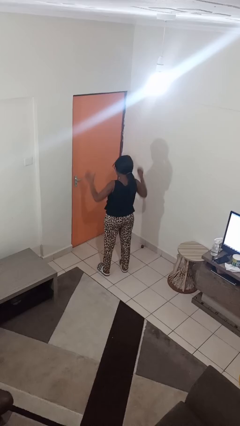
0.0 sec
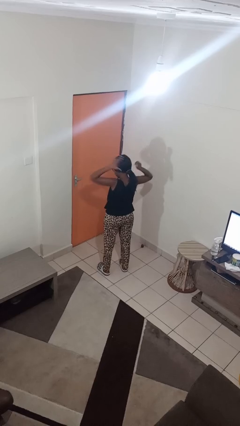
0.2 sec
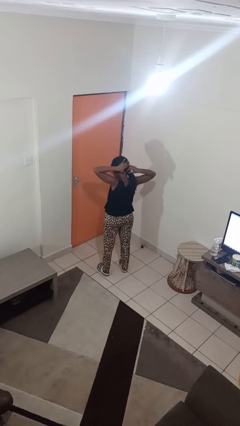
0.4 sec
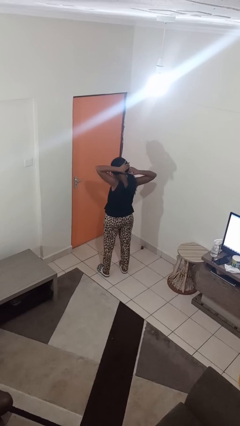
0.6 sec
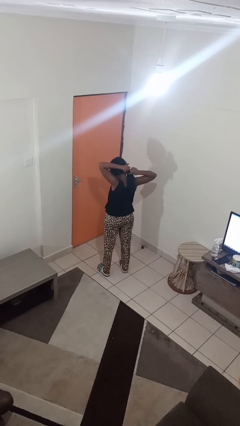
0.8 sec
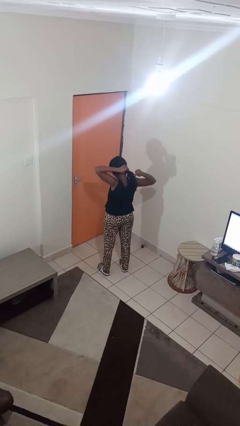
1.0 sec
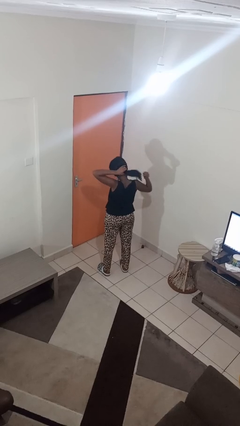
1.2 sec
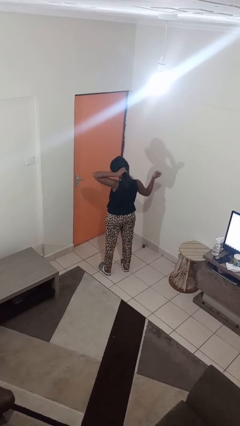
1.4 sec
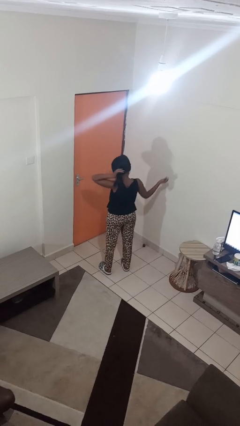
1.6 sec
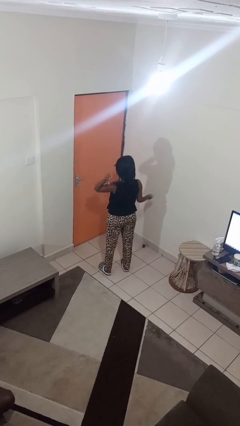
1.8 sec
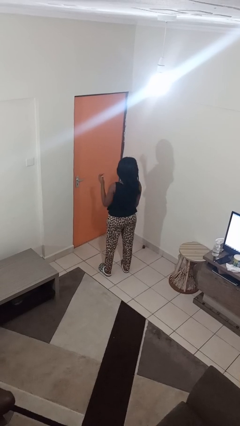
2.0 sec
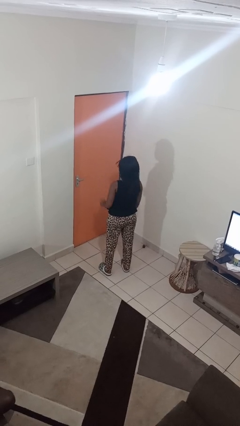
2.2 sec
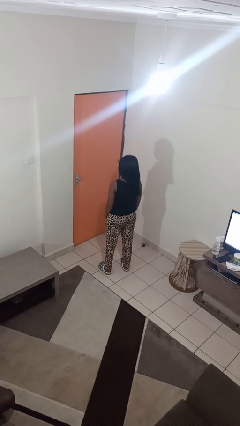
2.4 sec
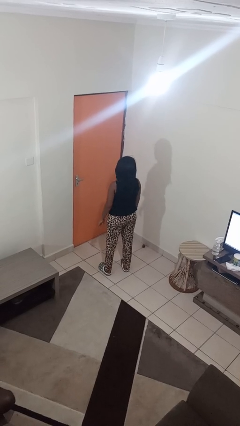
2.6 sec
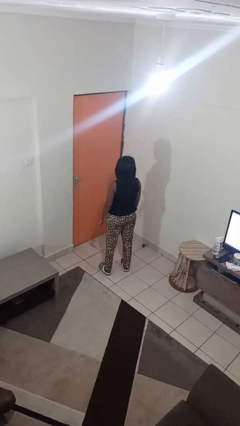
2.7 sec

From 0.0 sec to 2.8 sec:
person takes off hairtie

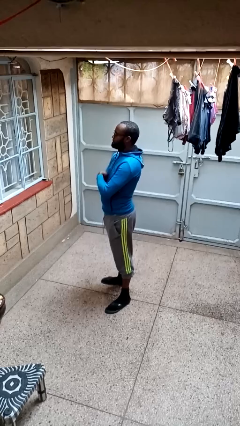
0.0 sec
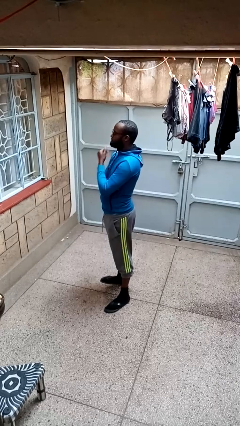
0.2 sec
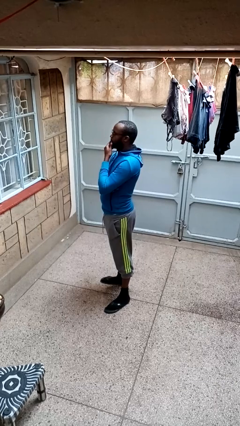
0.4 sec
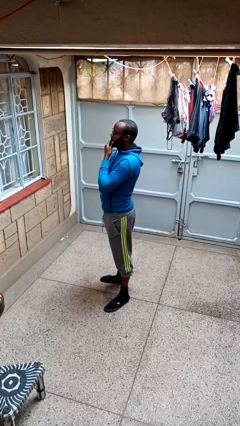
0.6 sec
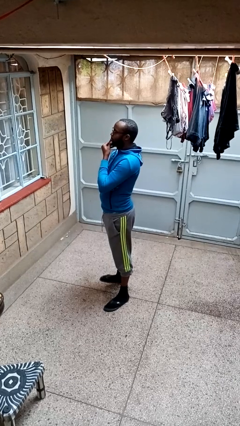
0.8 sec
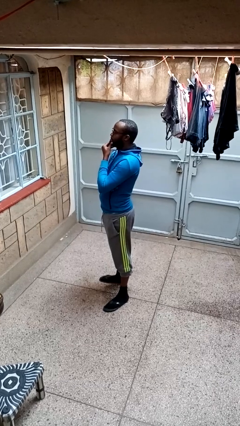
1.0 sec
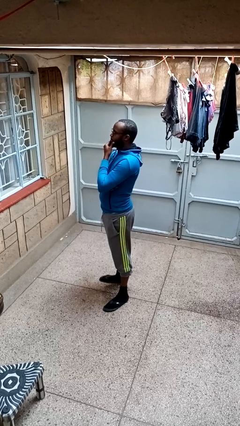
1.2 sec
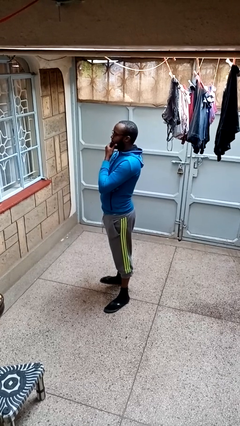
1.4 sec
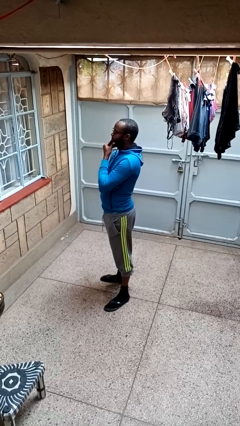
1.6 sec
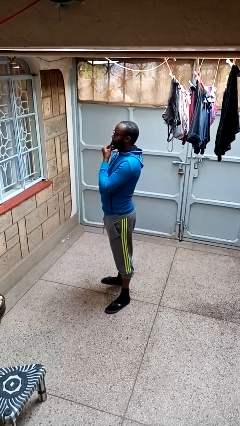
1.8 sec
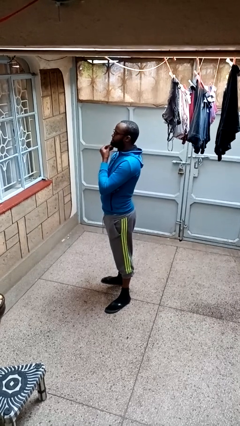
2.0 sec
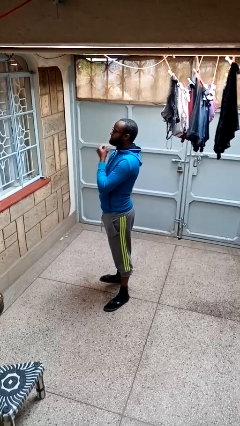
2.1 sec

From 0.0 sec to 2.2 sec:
person strokes chin

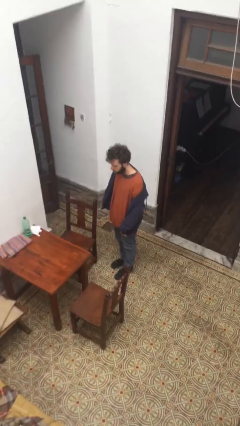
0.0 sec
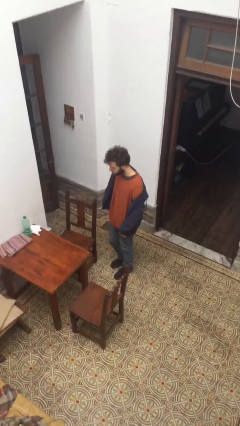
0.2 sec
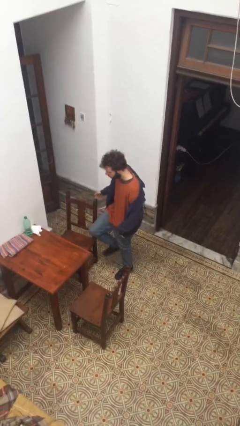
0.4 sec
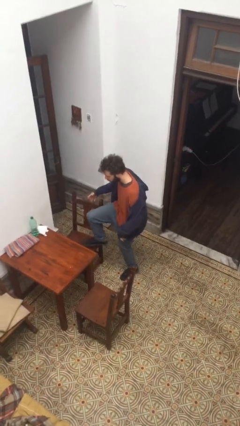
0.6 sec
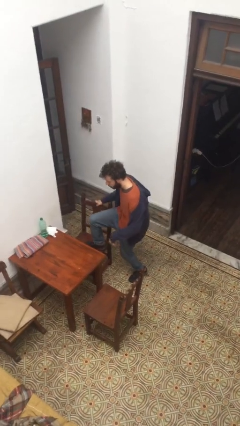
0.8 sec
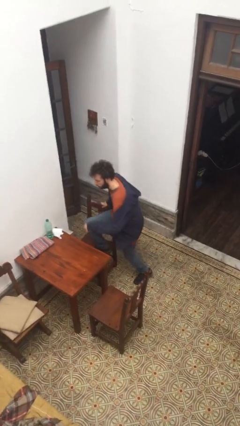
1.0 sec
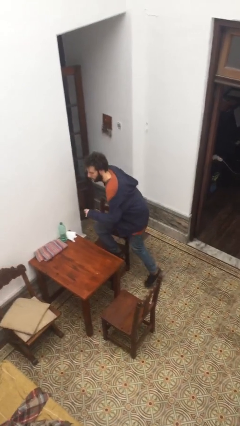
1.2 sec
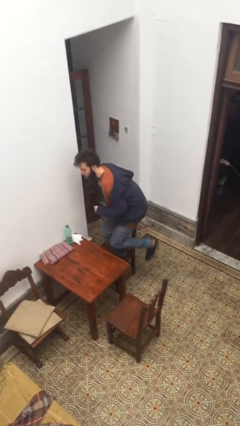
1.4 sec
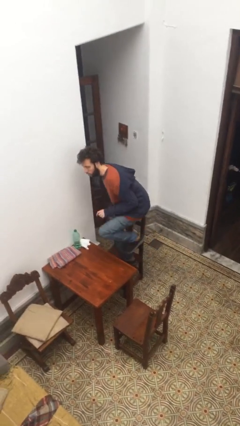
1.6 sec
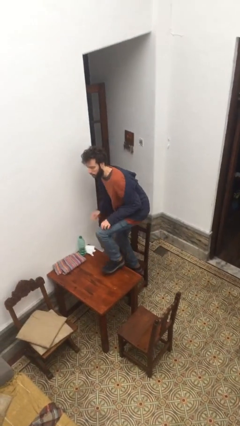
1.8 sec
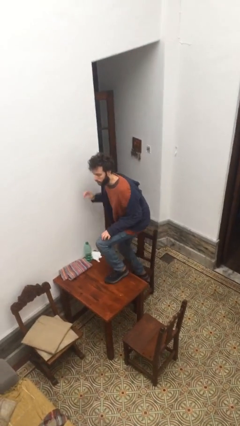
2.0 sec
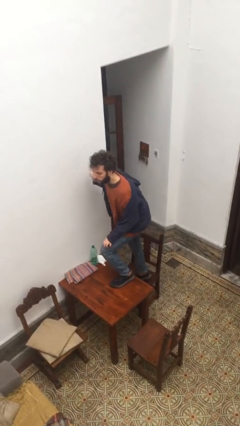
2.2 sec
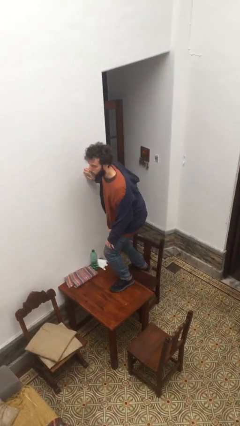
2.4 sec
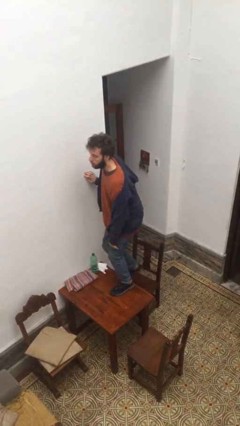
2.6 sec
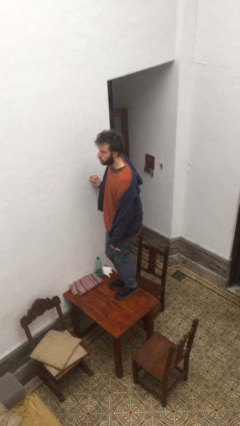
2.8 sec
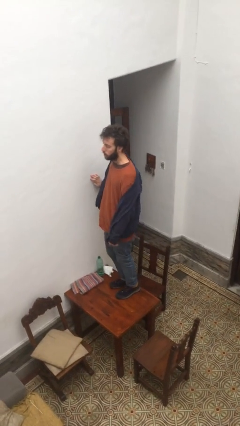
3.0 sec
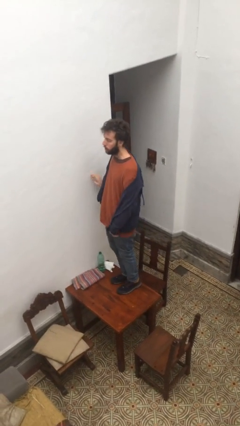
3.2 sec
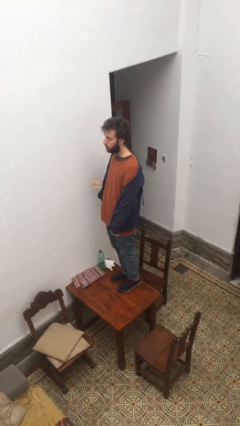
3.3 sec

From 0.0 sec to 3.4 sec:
person climbs on table

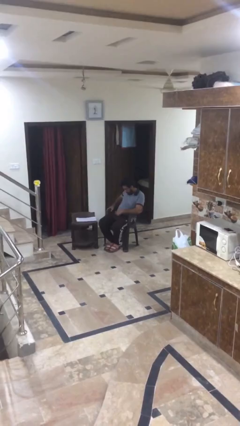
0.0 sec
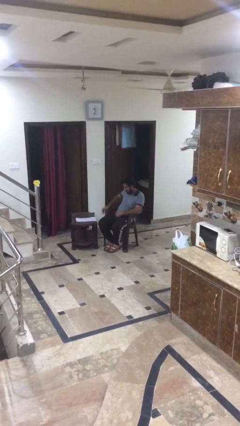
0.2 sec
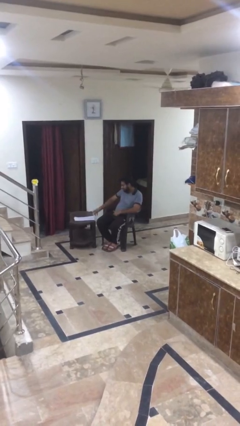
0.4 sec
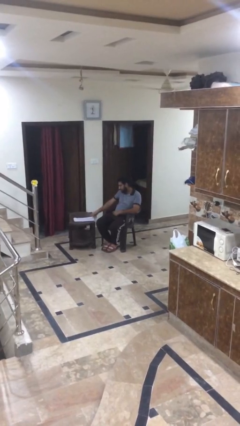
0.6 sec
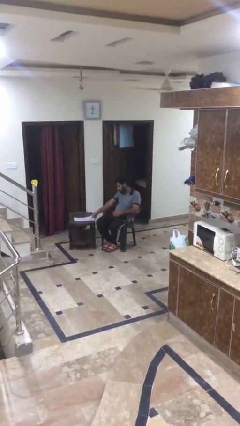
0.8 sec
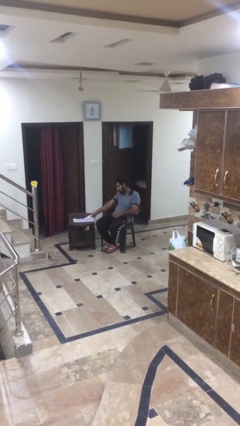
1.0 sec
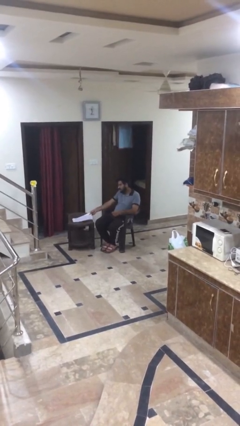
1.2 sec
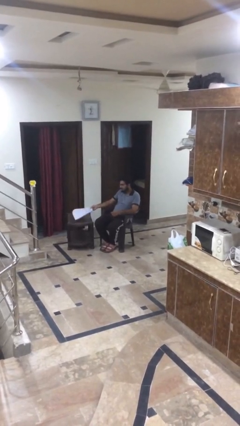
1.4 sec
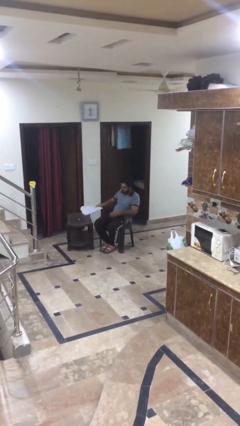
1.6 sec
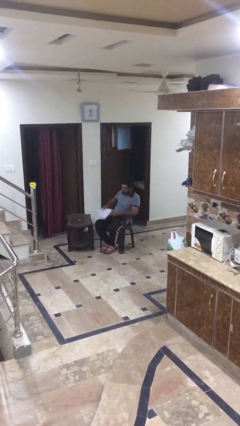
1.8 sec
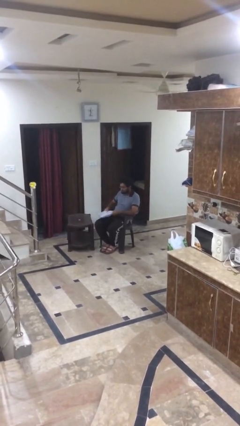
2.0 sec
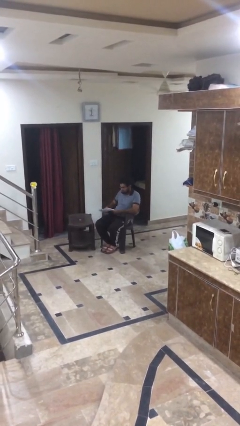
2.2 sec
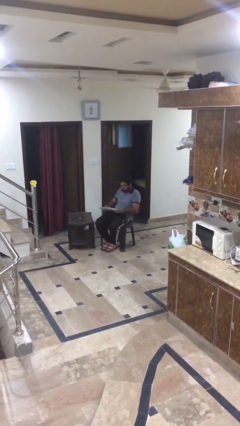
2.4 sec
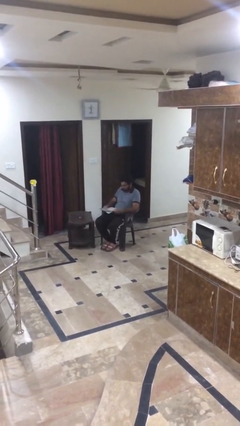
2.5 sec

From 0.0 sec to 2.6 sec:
person picks up object from table

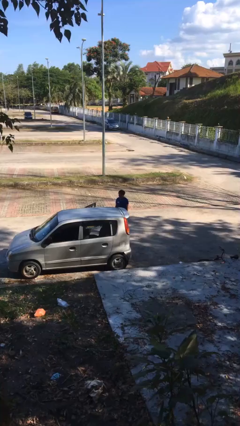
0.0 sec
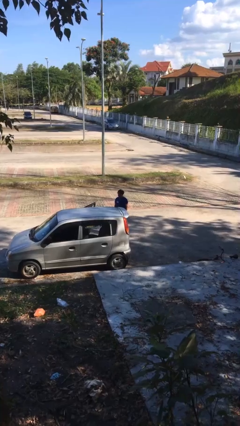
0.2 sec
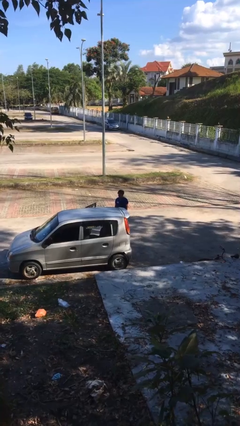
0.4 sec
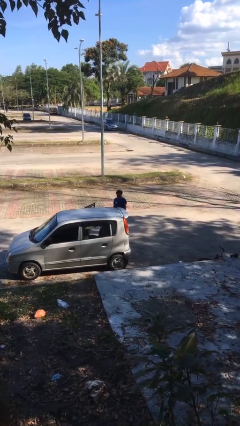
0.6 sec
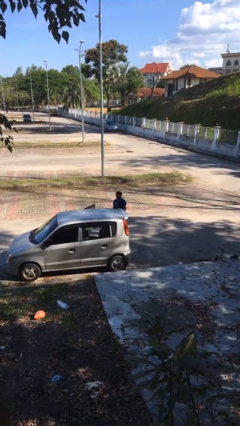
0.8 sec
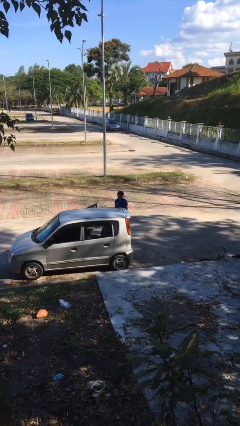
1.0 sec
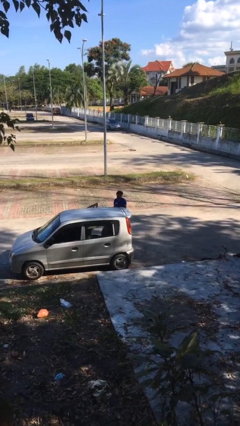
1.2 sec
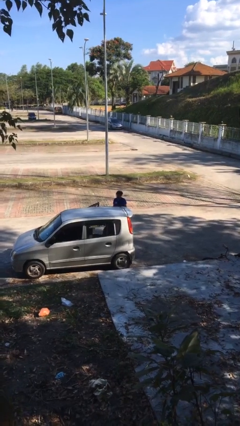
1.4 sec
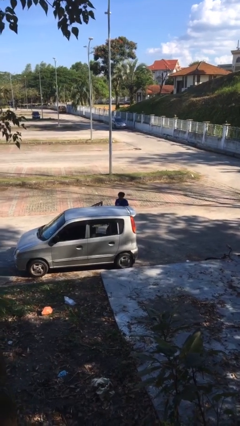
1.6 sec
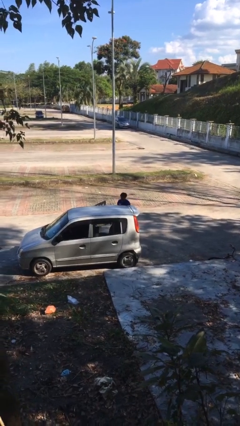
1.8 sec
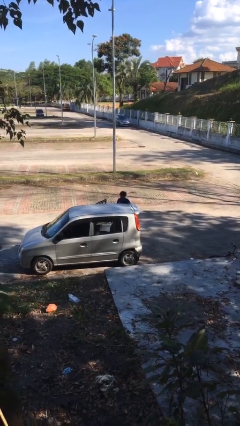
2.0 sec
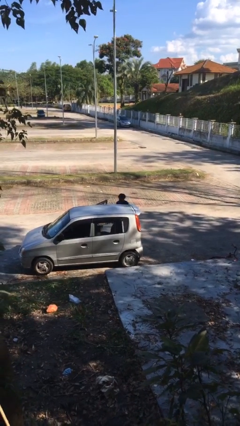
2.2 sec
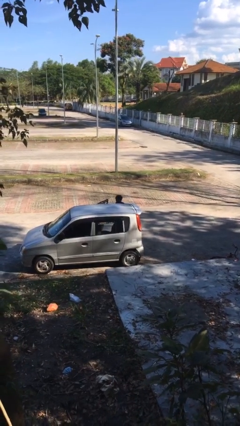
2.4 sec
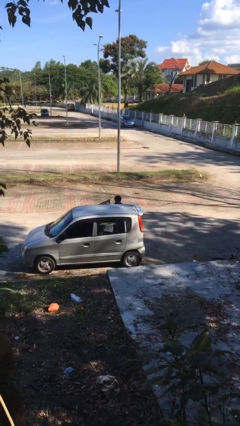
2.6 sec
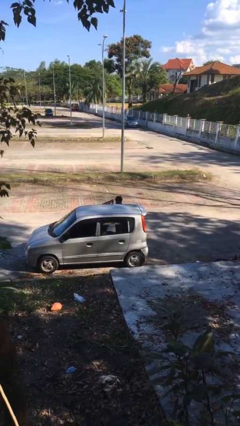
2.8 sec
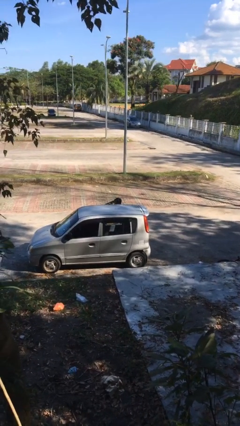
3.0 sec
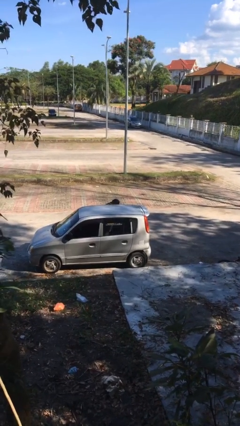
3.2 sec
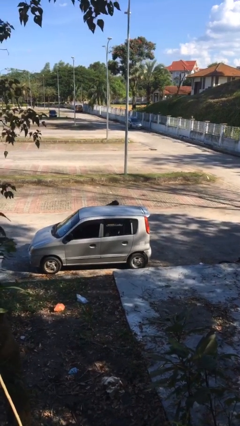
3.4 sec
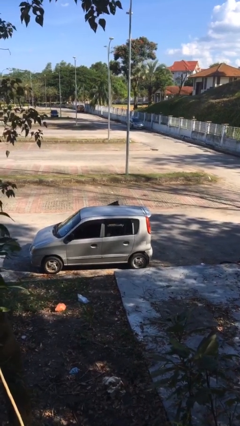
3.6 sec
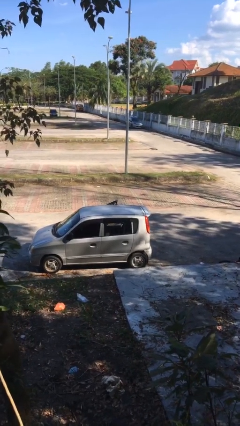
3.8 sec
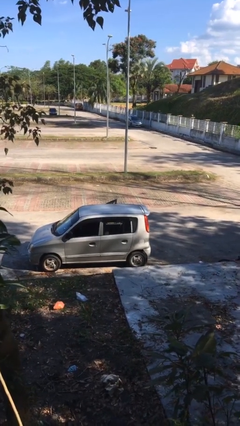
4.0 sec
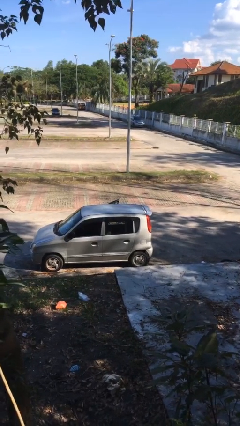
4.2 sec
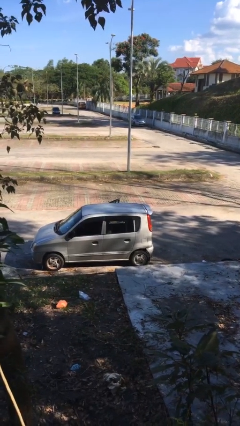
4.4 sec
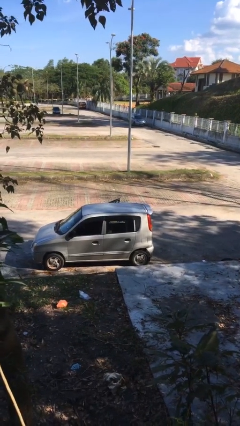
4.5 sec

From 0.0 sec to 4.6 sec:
person enters car

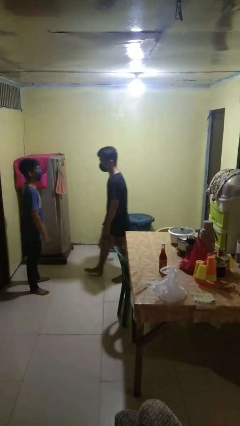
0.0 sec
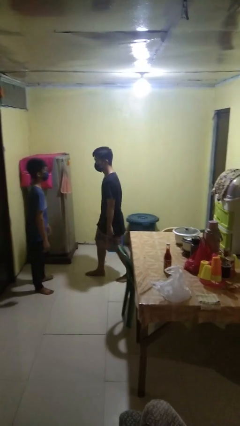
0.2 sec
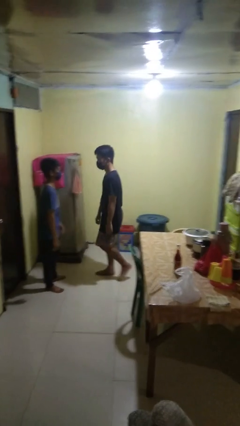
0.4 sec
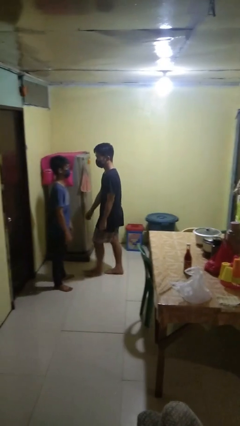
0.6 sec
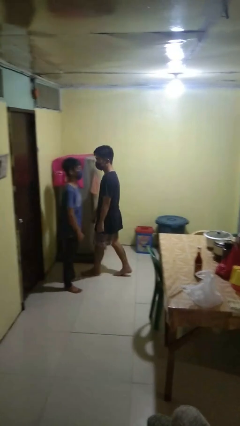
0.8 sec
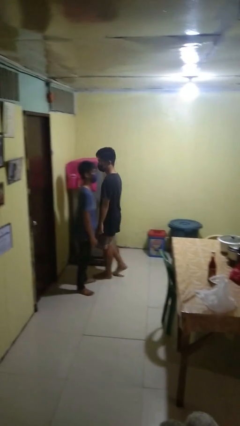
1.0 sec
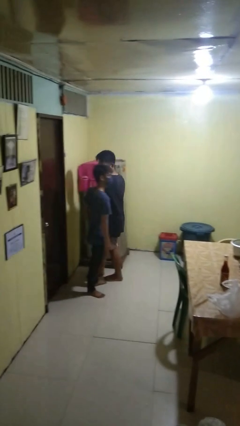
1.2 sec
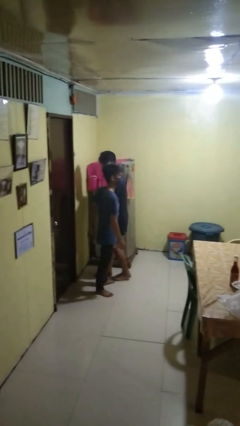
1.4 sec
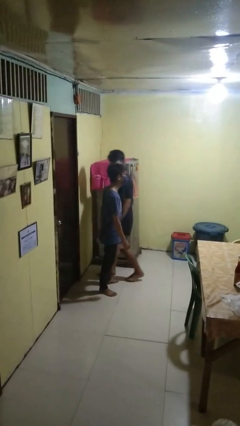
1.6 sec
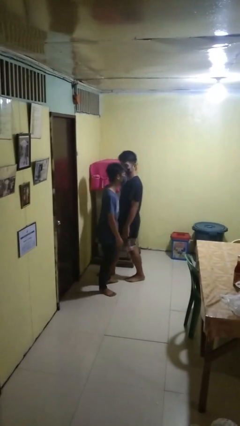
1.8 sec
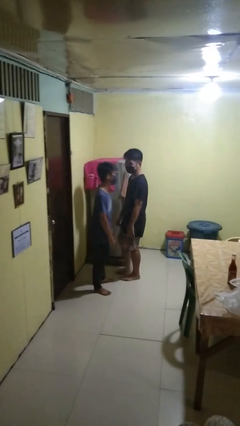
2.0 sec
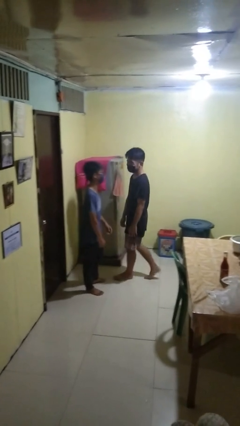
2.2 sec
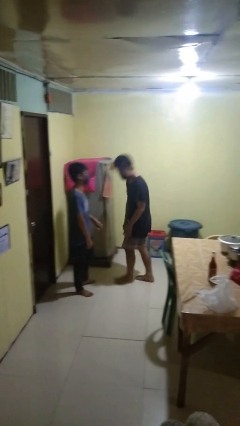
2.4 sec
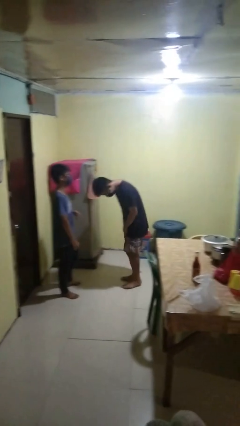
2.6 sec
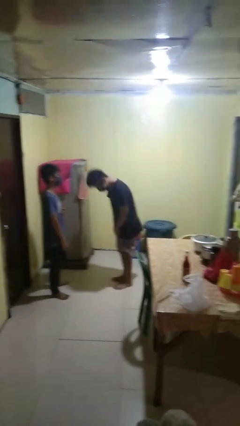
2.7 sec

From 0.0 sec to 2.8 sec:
person bumps into person
